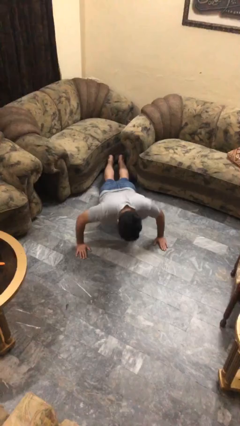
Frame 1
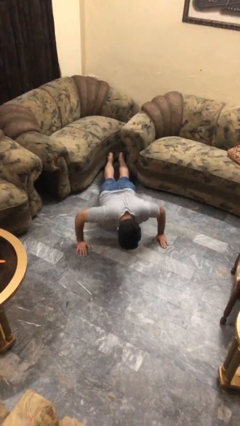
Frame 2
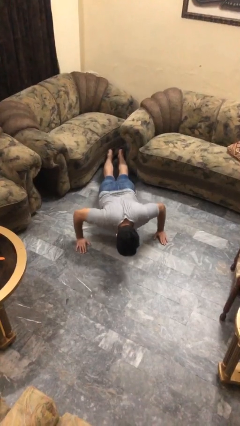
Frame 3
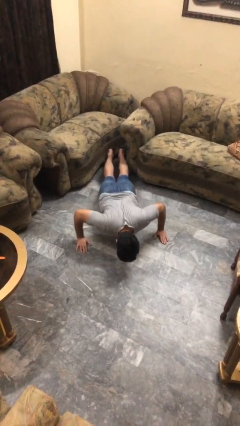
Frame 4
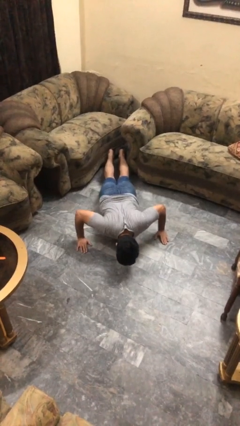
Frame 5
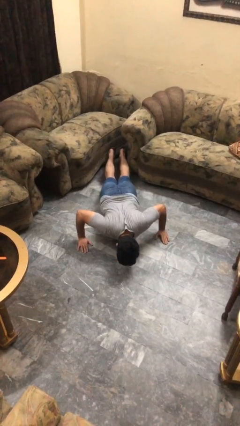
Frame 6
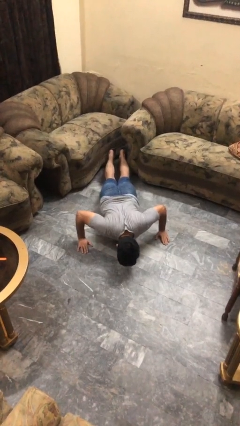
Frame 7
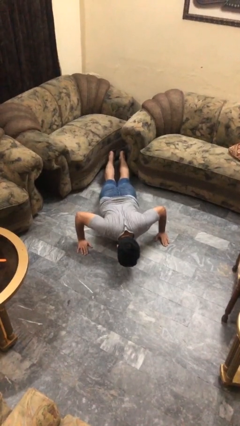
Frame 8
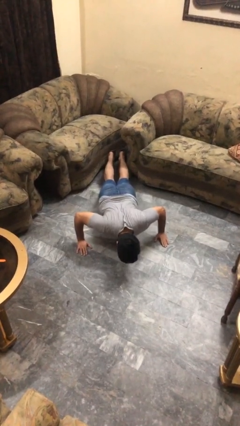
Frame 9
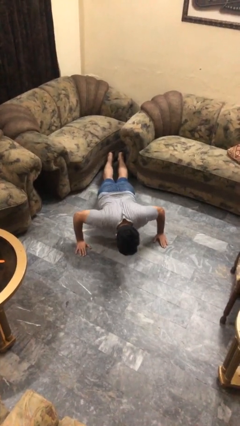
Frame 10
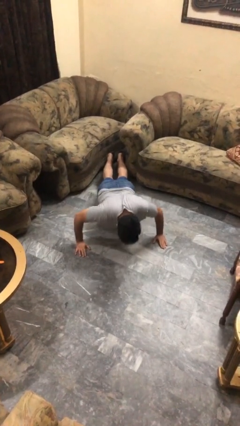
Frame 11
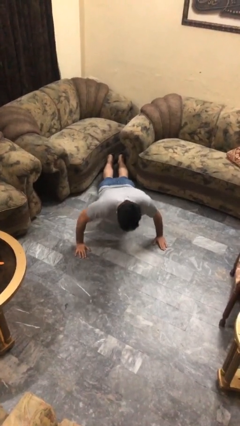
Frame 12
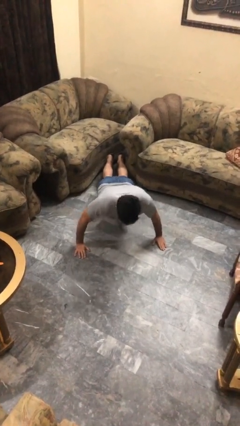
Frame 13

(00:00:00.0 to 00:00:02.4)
person exercises with pushup

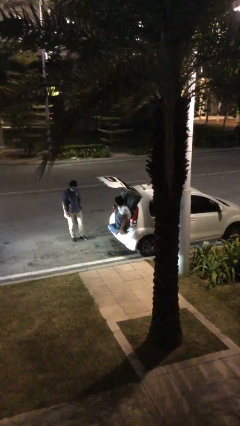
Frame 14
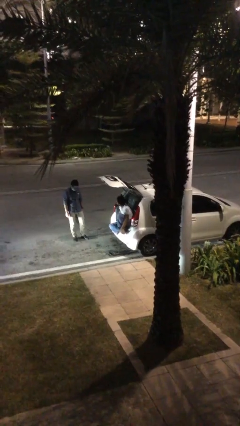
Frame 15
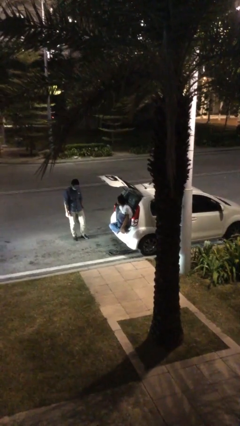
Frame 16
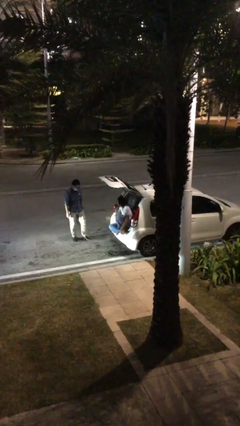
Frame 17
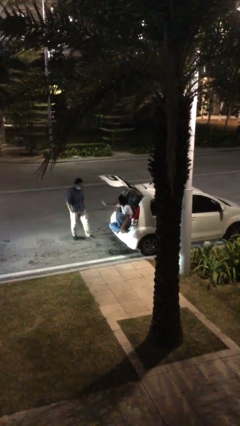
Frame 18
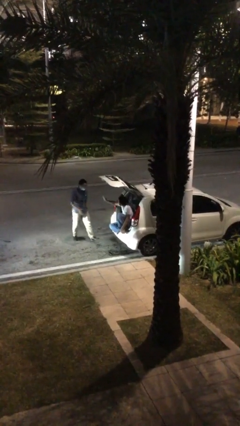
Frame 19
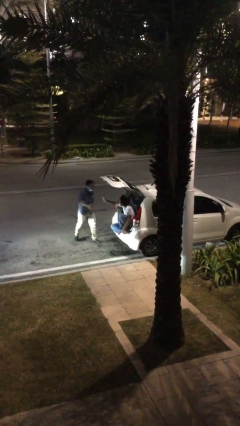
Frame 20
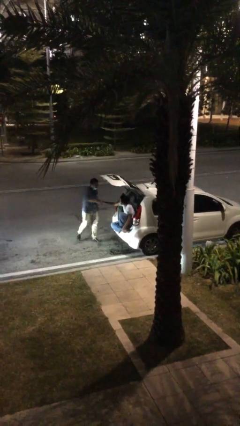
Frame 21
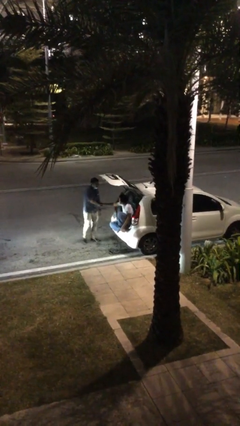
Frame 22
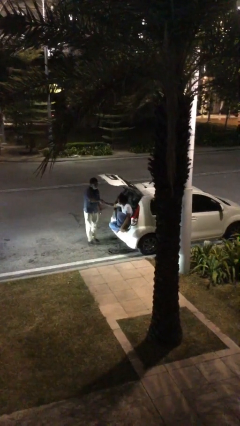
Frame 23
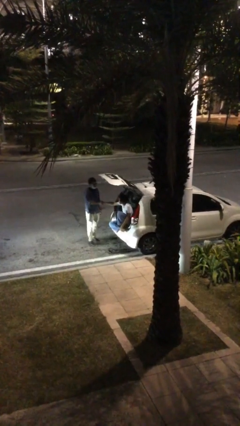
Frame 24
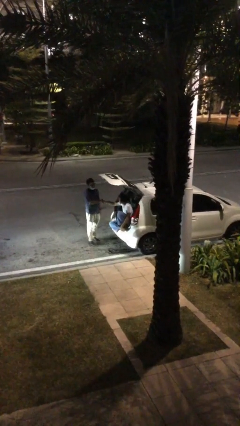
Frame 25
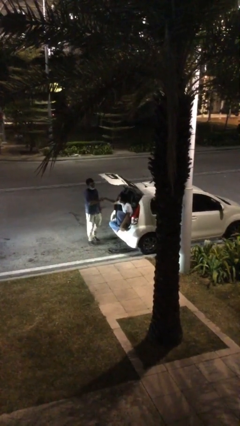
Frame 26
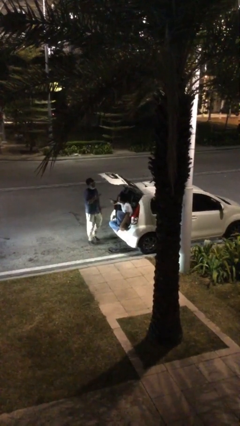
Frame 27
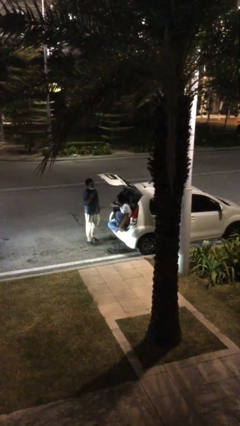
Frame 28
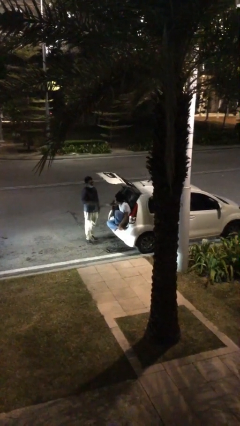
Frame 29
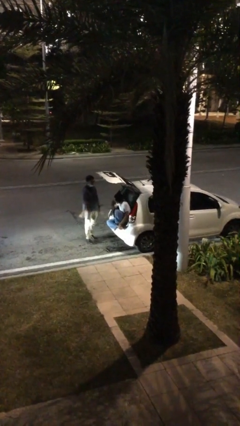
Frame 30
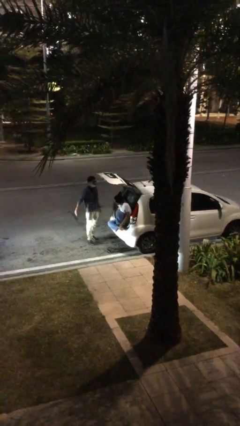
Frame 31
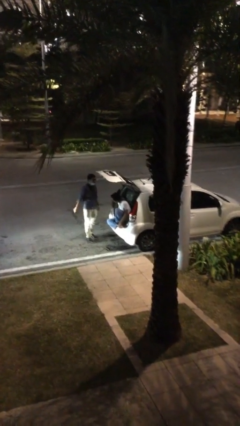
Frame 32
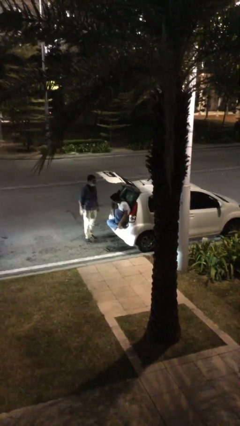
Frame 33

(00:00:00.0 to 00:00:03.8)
person shakes hand

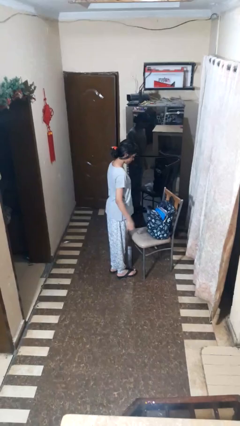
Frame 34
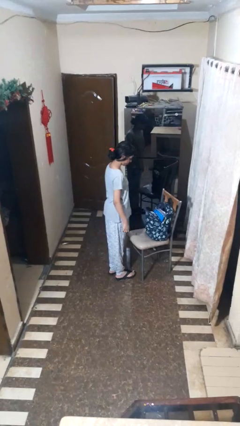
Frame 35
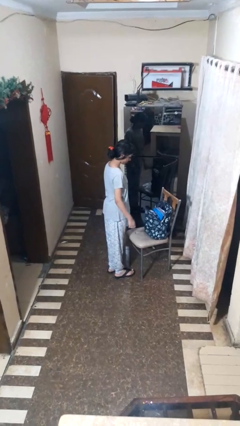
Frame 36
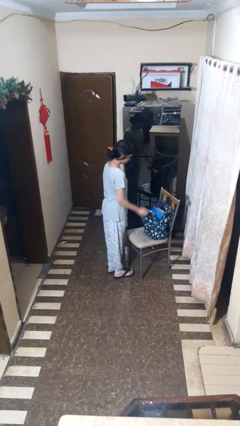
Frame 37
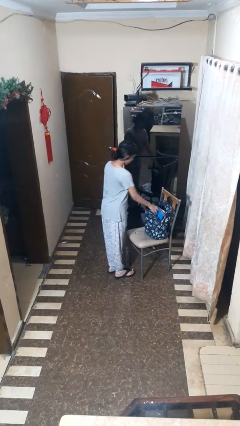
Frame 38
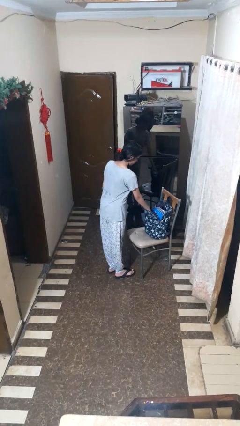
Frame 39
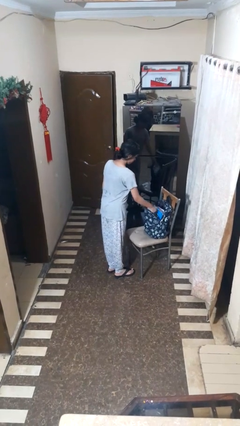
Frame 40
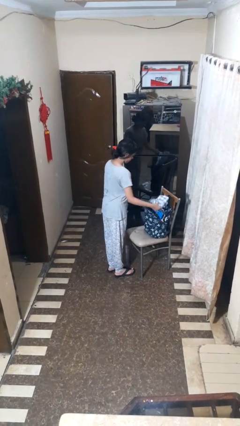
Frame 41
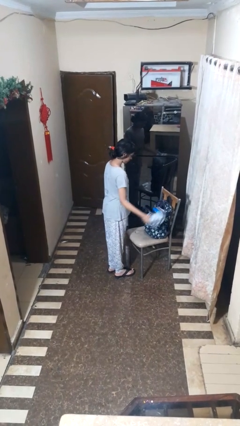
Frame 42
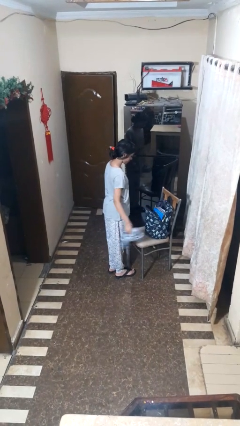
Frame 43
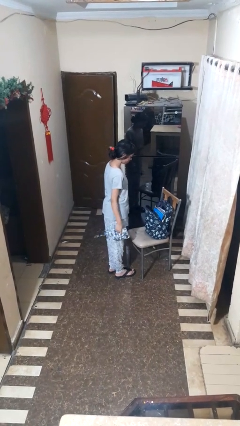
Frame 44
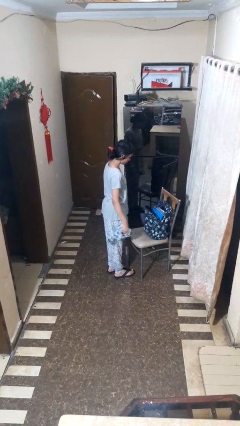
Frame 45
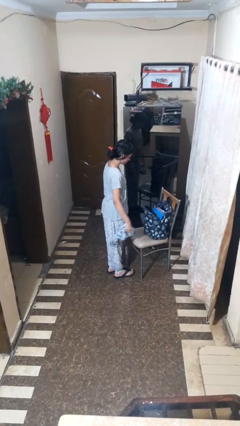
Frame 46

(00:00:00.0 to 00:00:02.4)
person takes object from bag

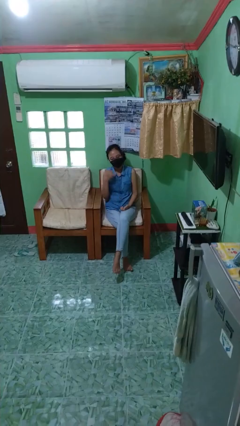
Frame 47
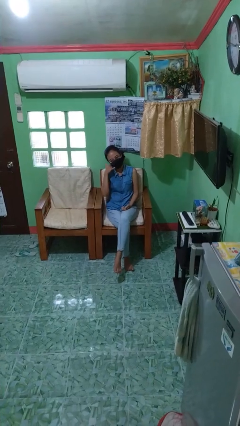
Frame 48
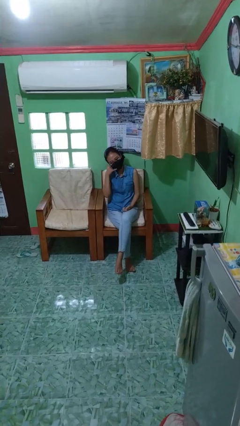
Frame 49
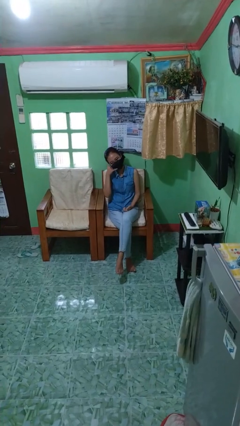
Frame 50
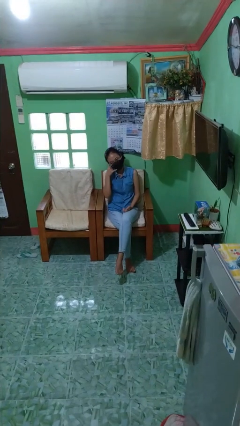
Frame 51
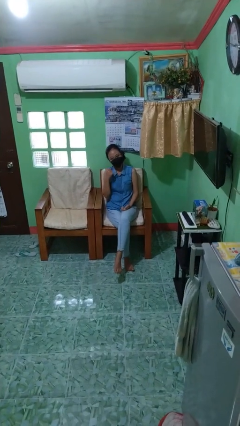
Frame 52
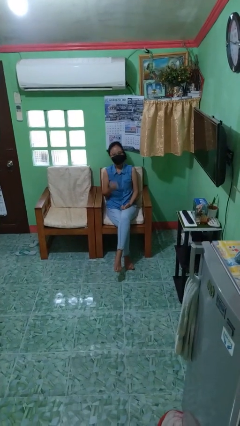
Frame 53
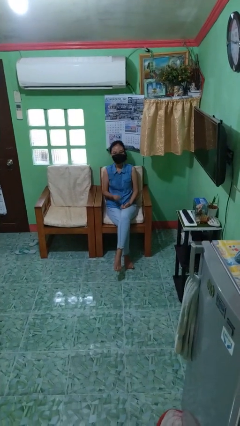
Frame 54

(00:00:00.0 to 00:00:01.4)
person gestures call me

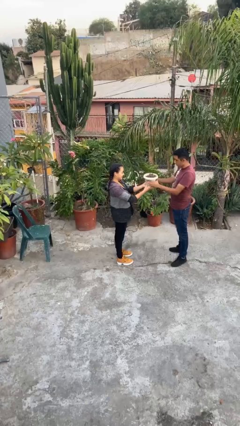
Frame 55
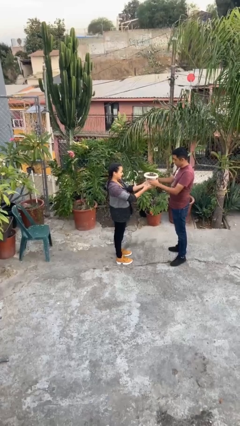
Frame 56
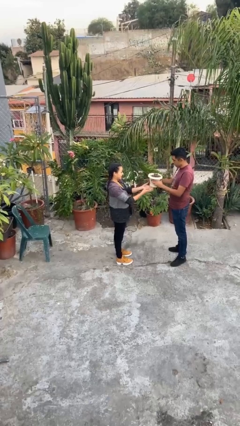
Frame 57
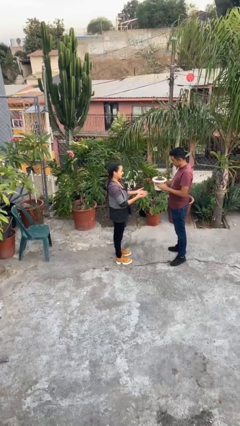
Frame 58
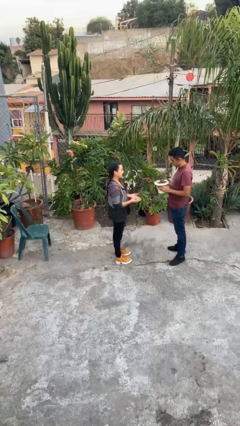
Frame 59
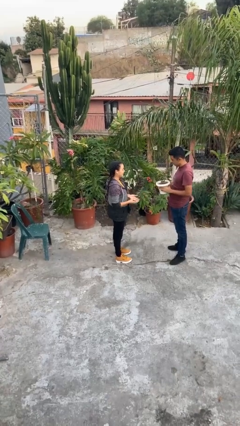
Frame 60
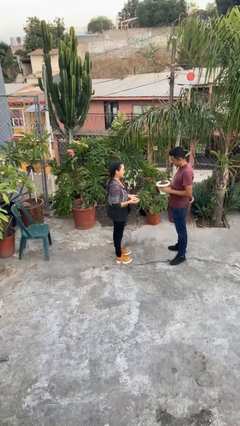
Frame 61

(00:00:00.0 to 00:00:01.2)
person transfers object to person

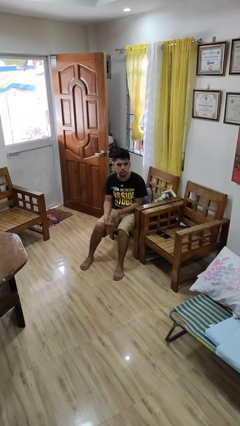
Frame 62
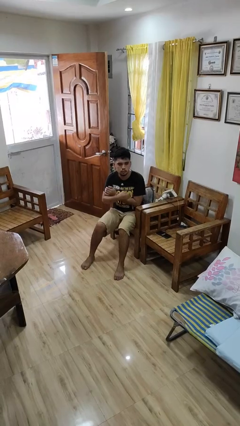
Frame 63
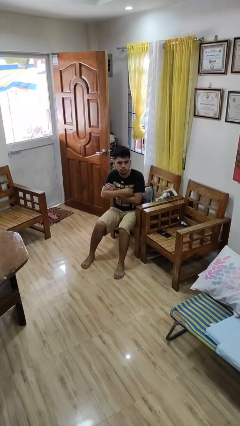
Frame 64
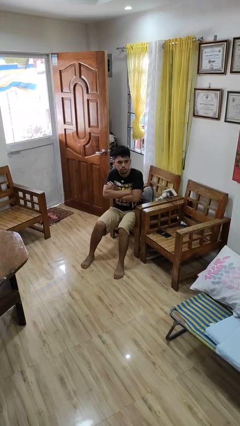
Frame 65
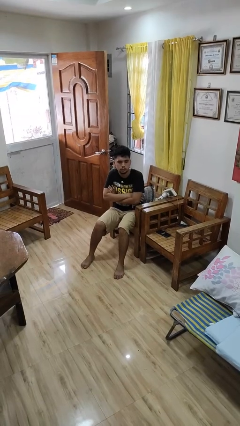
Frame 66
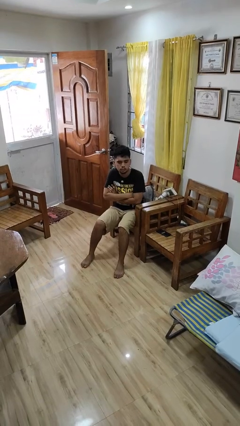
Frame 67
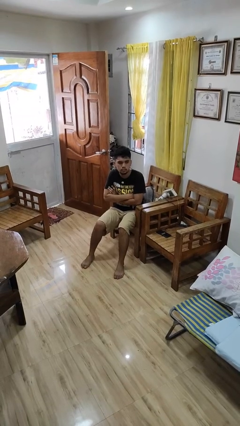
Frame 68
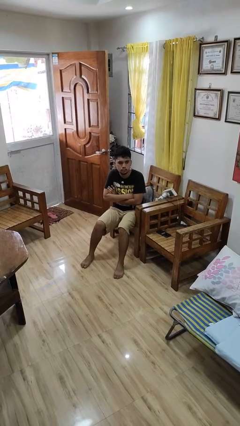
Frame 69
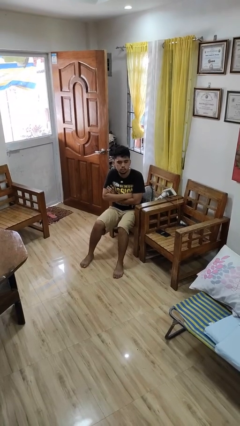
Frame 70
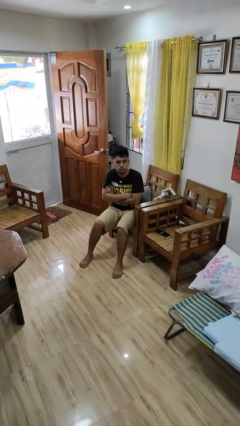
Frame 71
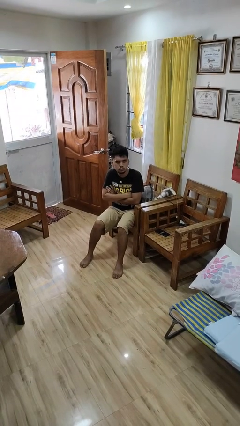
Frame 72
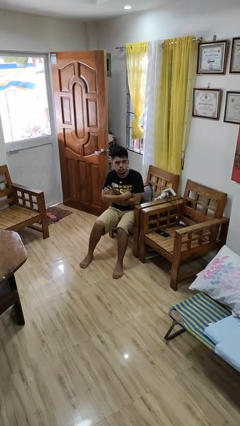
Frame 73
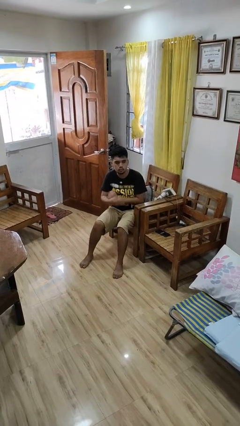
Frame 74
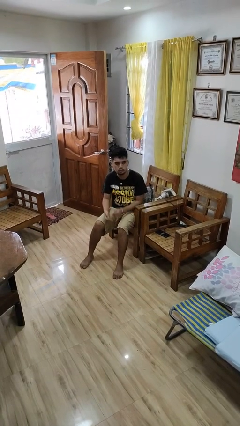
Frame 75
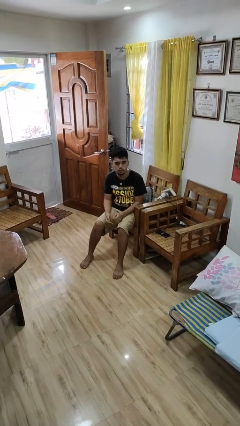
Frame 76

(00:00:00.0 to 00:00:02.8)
person crosses arms

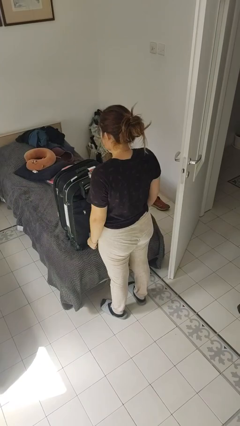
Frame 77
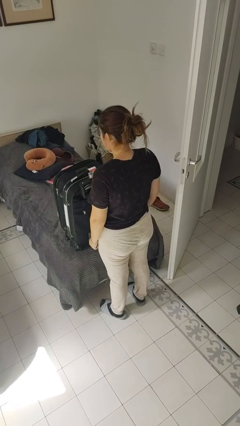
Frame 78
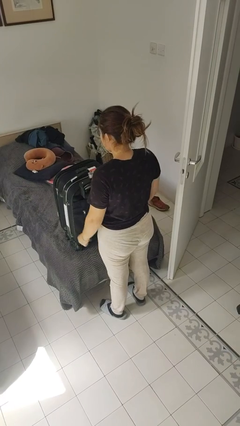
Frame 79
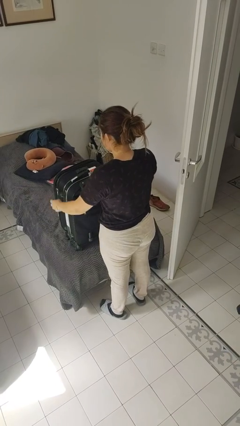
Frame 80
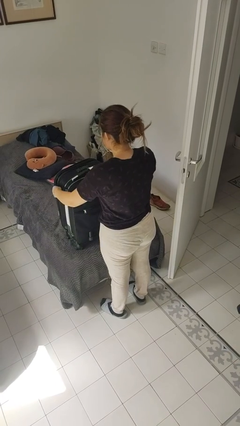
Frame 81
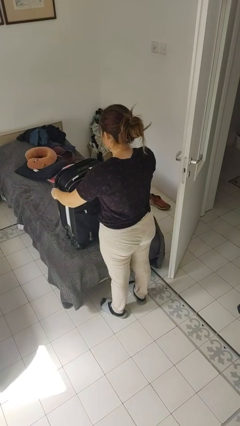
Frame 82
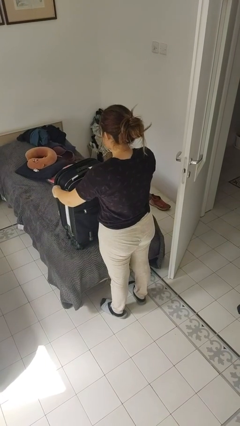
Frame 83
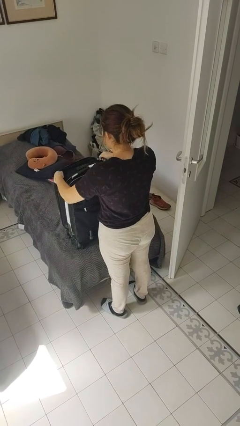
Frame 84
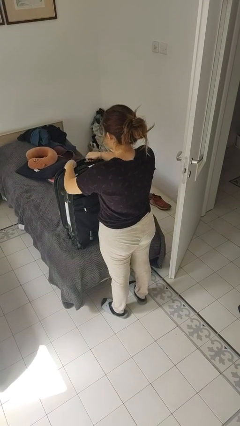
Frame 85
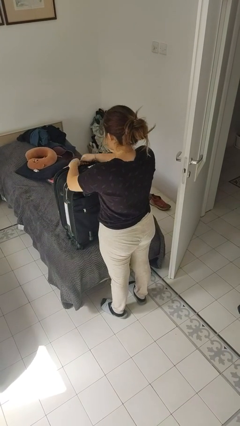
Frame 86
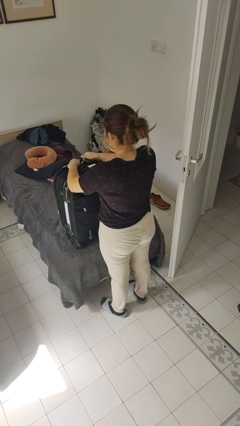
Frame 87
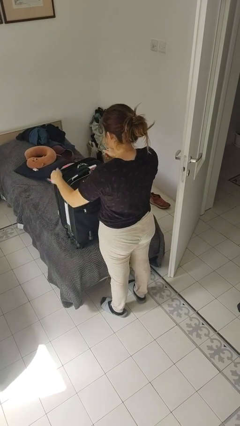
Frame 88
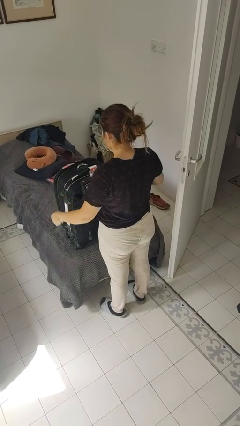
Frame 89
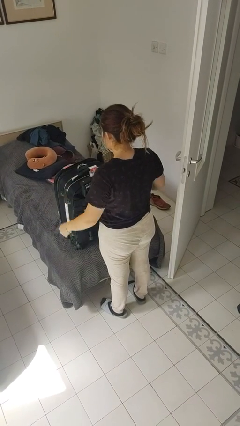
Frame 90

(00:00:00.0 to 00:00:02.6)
person closes suitcase

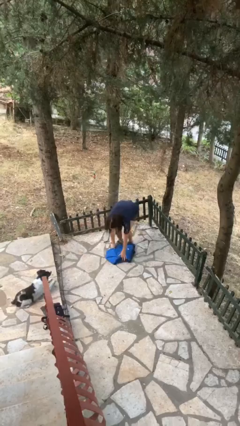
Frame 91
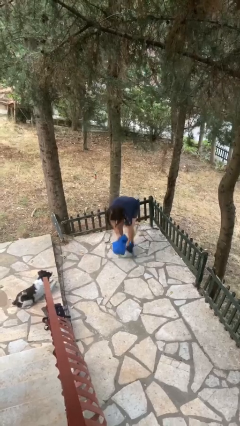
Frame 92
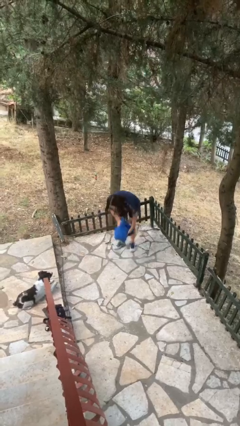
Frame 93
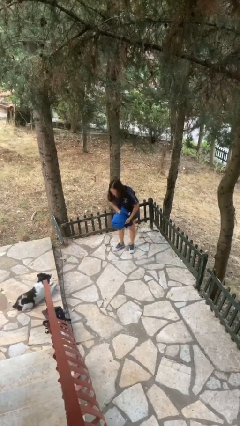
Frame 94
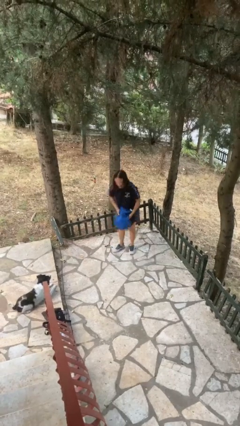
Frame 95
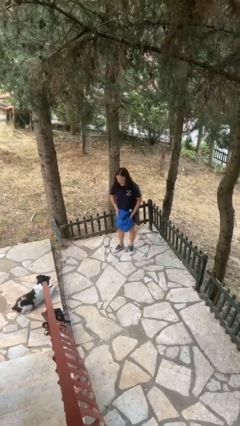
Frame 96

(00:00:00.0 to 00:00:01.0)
person picks up object from floor
